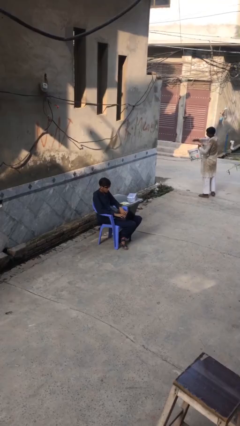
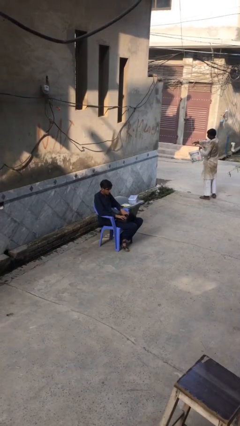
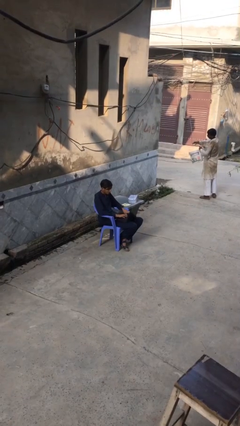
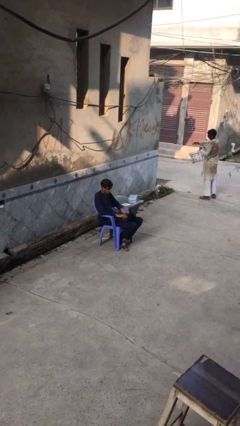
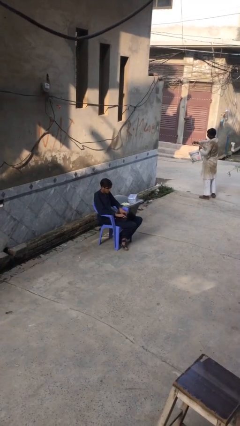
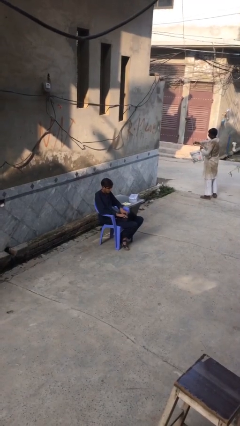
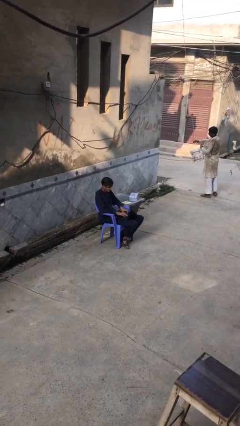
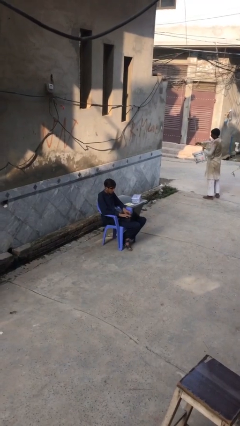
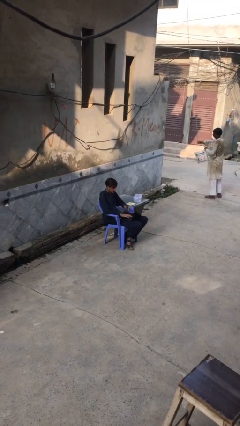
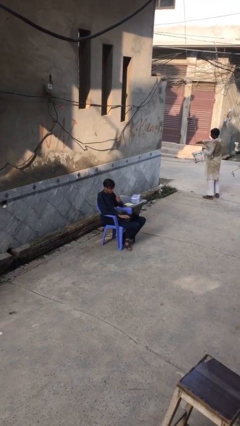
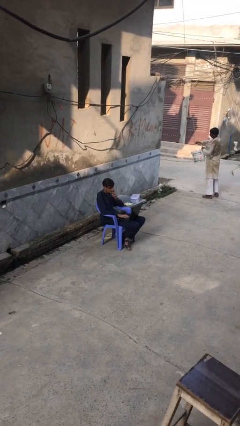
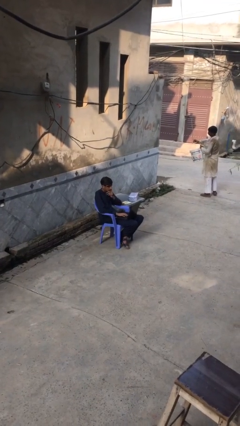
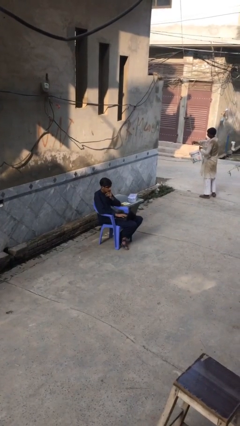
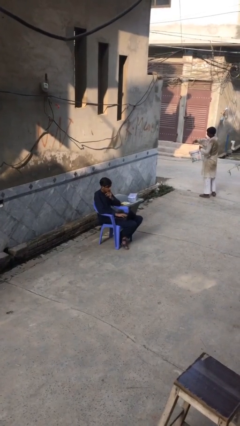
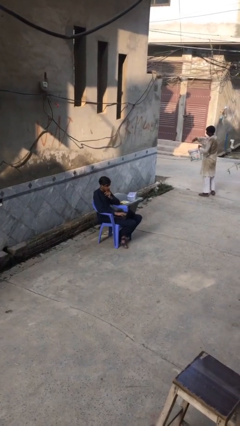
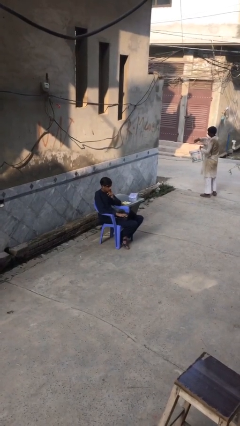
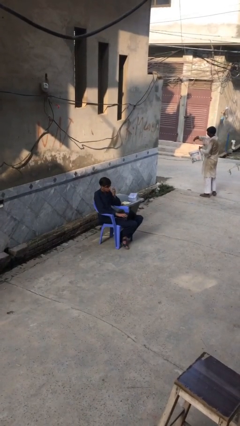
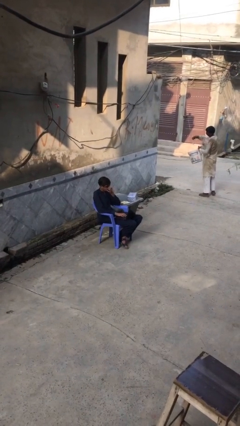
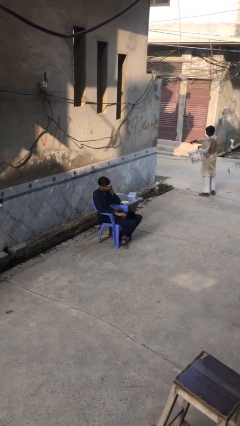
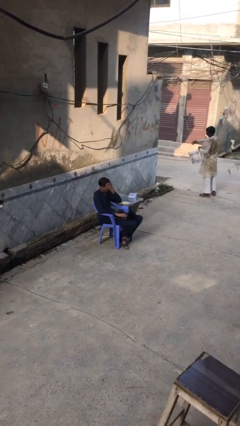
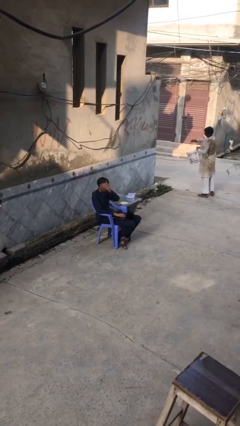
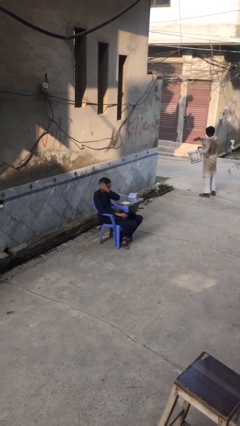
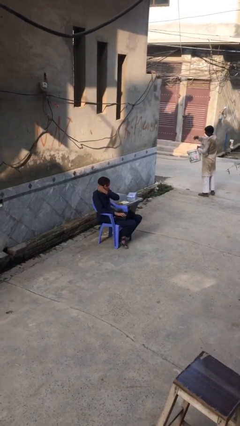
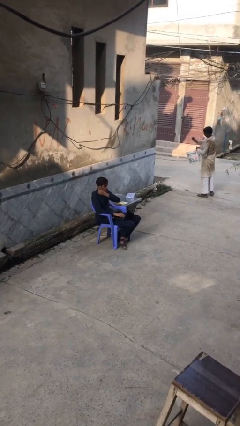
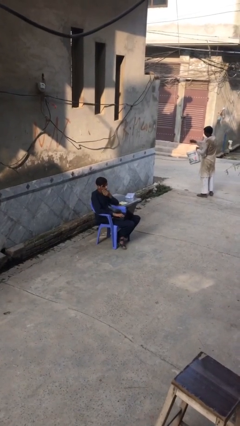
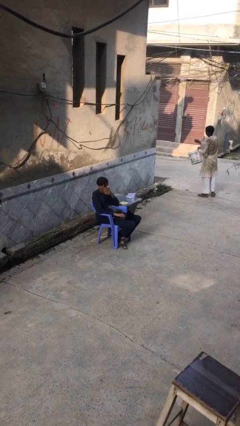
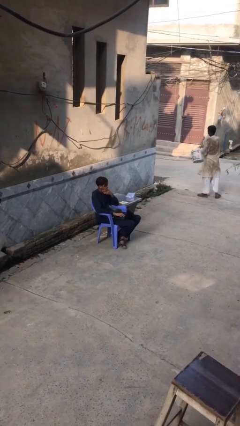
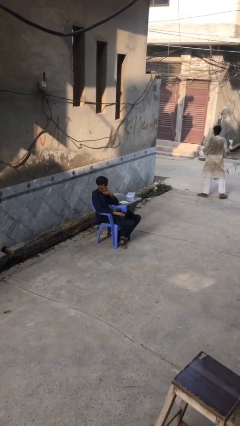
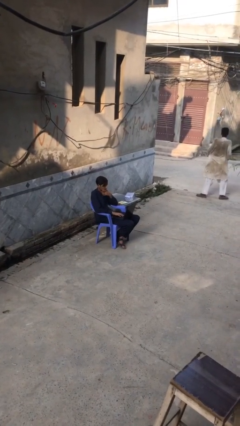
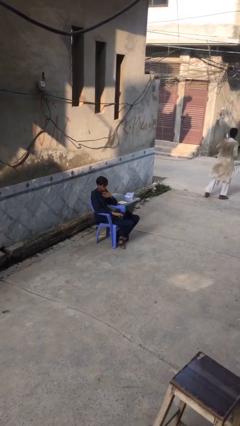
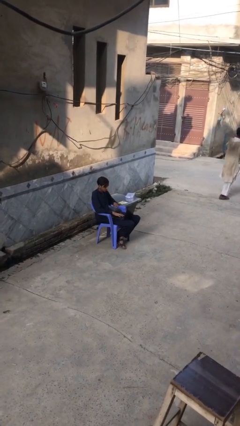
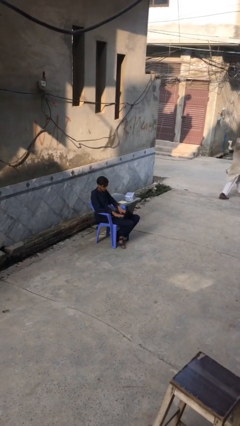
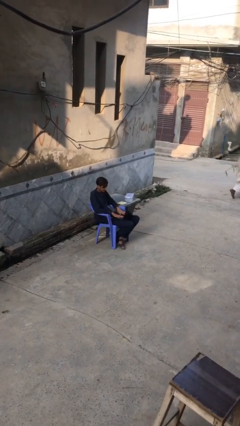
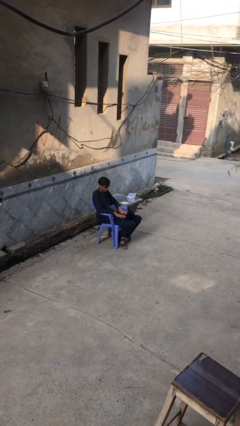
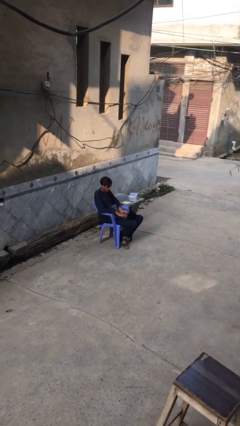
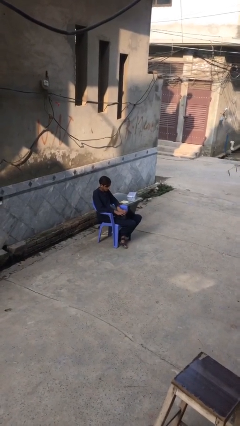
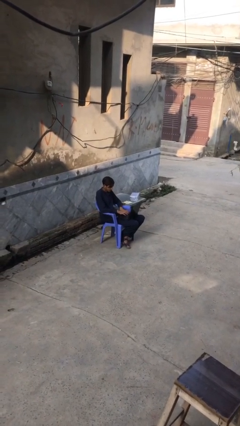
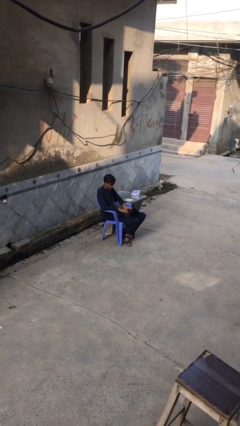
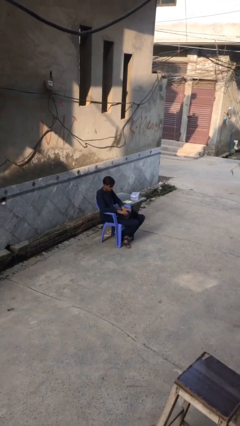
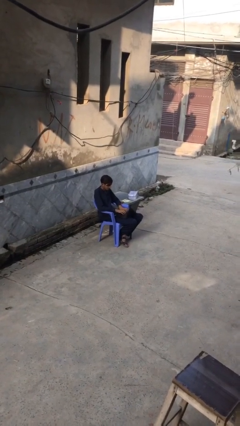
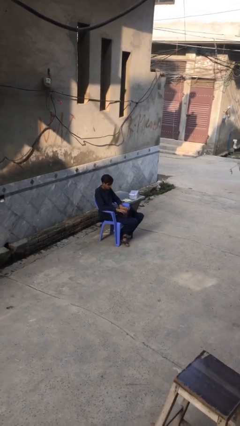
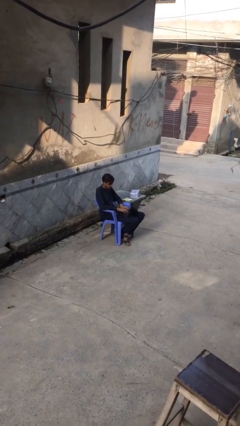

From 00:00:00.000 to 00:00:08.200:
person interacts with laptop

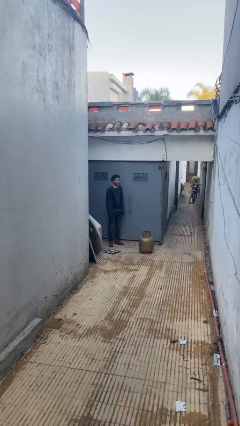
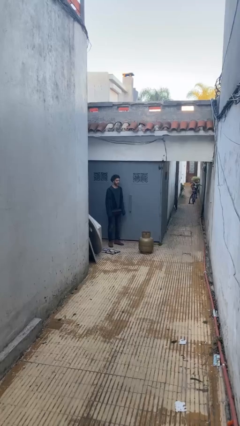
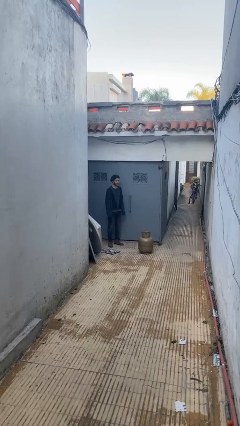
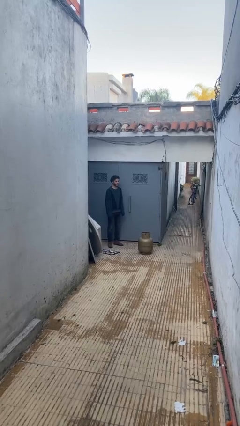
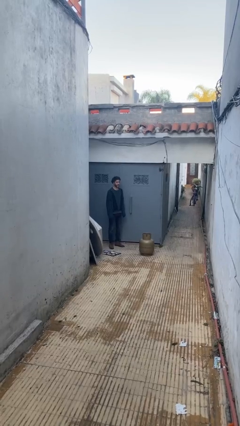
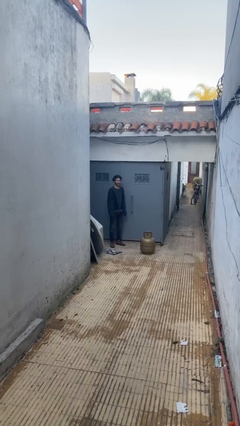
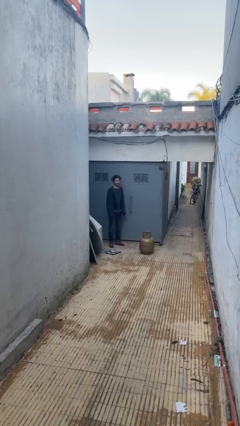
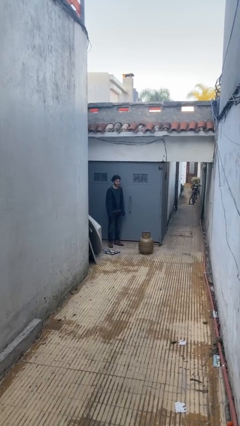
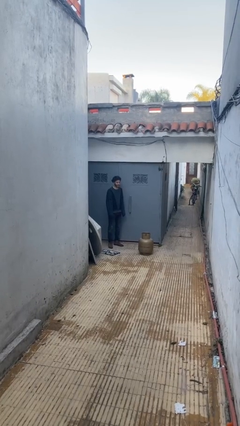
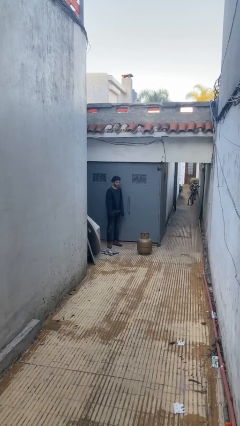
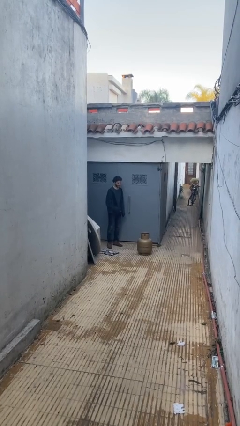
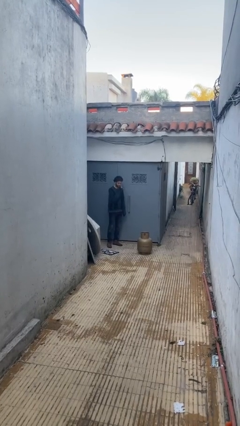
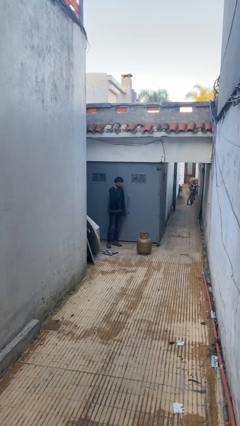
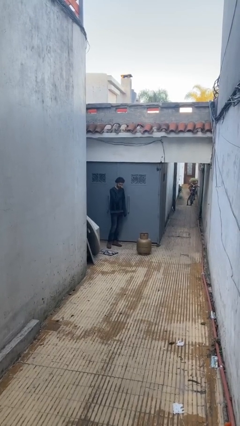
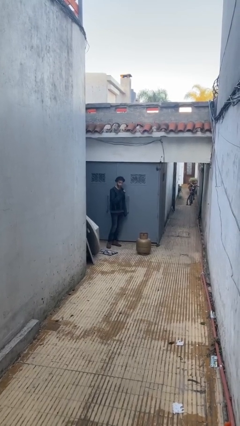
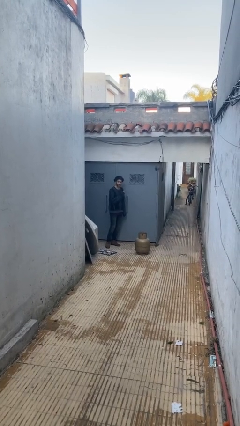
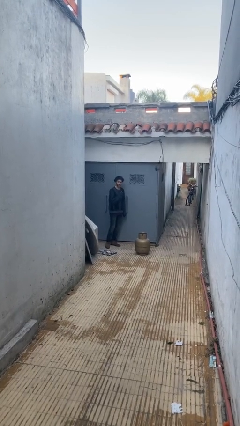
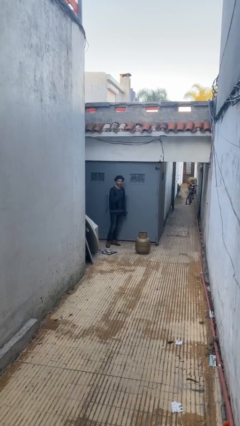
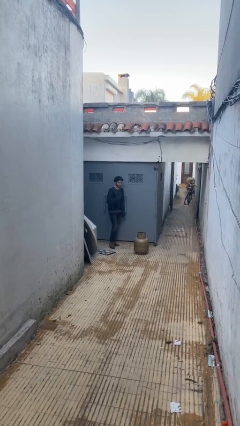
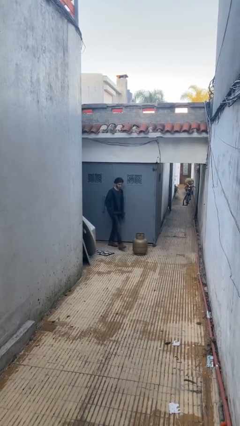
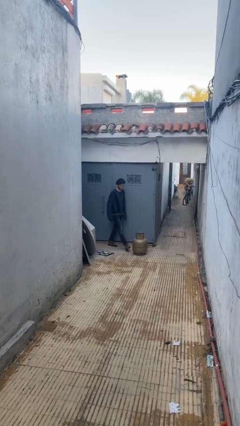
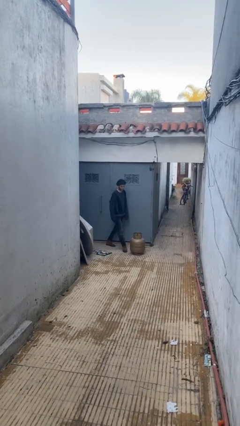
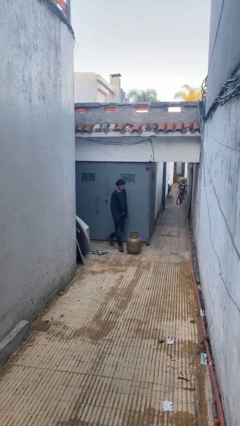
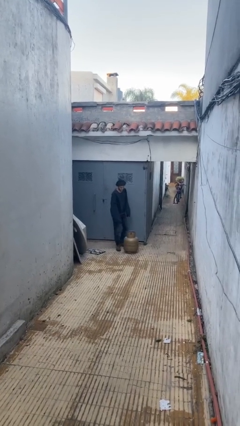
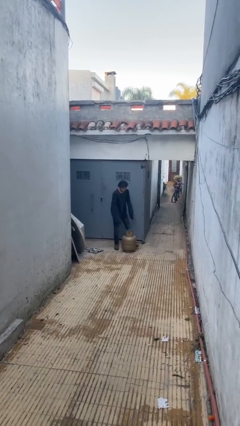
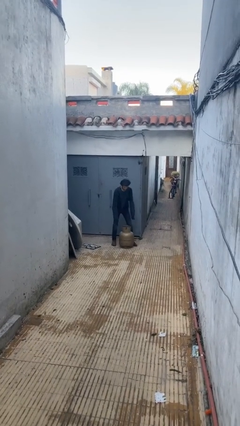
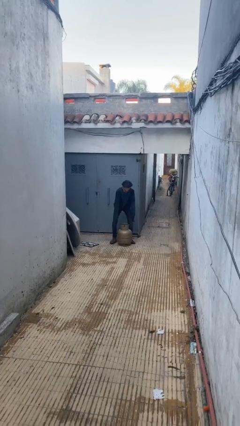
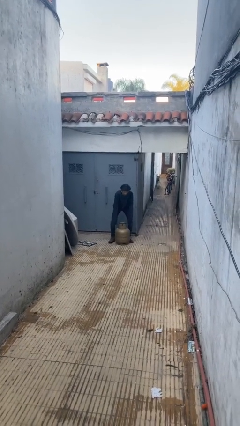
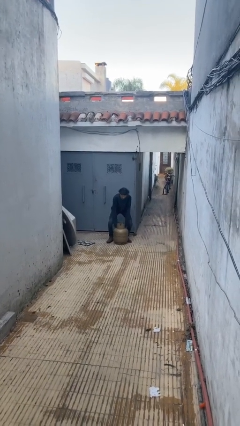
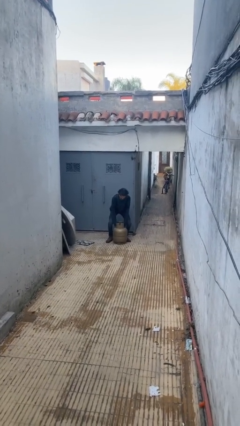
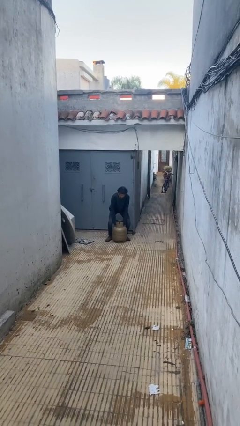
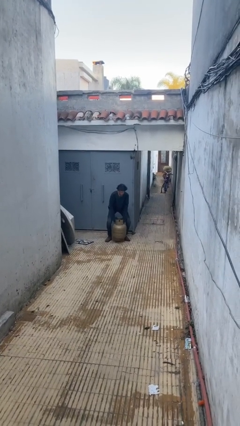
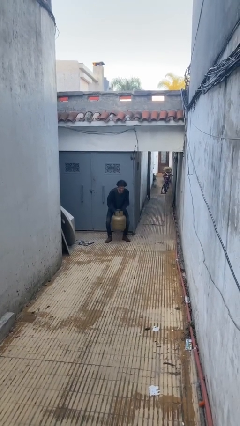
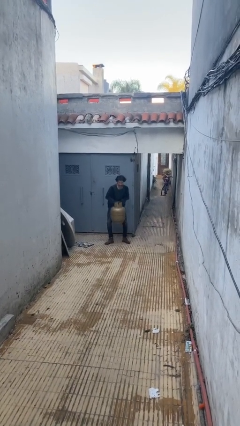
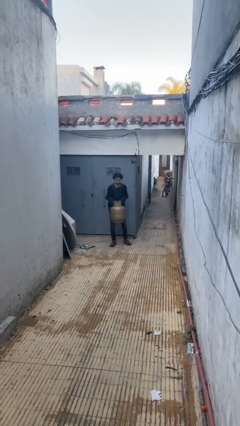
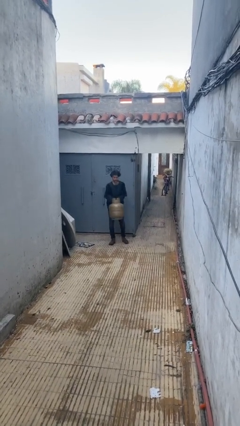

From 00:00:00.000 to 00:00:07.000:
person picks up object from floor

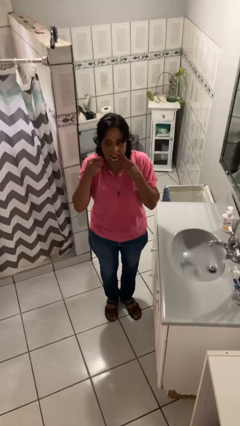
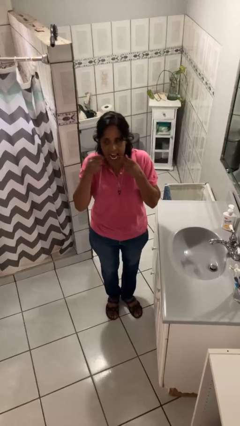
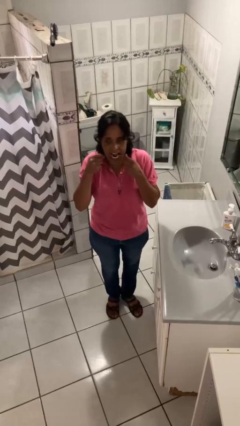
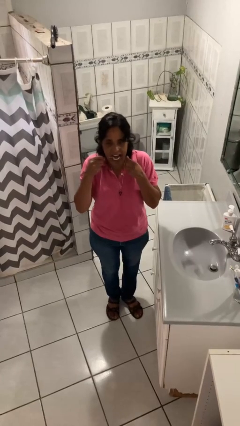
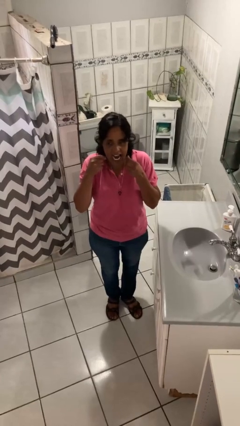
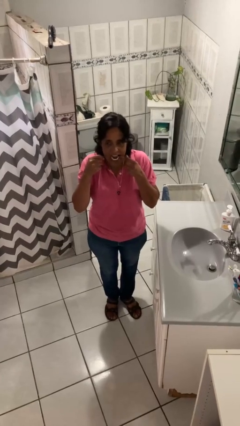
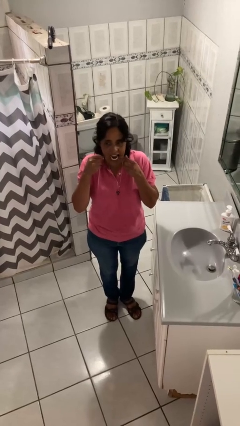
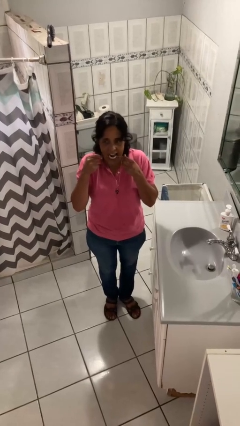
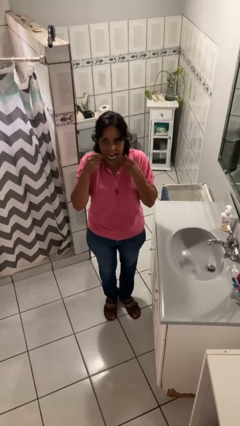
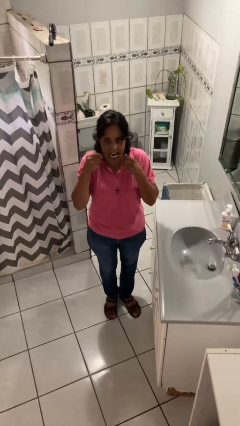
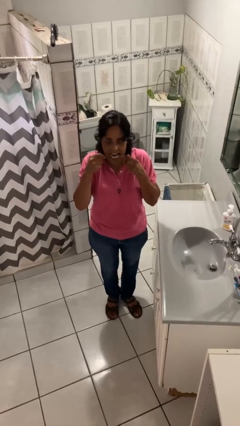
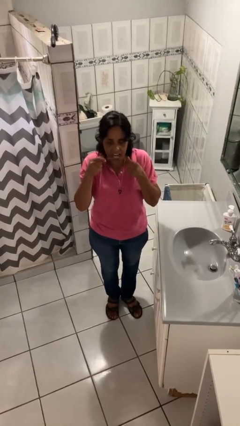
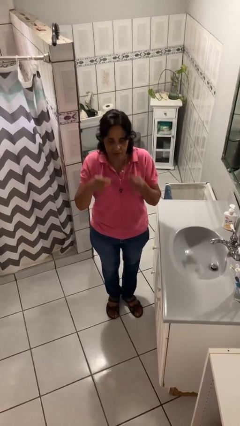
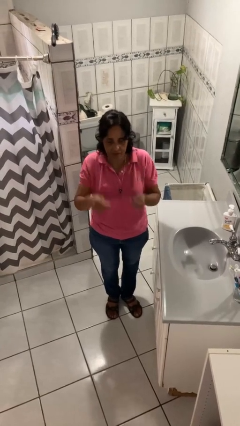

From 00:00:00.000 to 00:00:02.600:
person flosses
